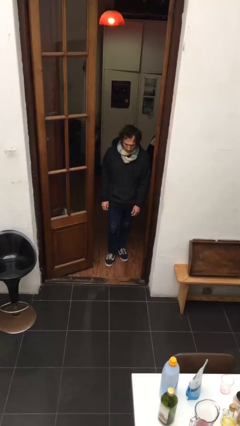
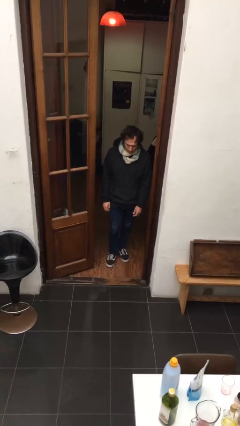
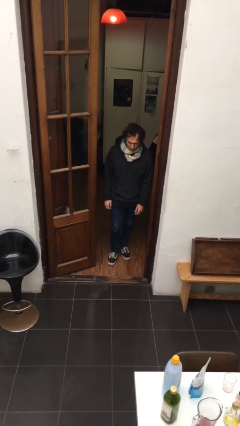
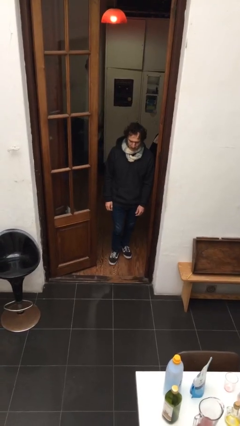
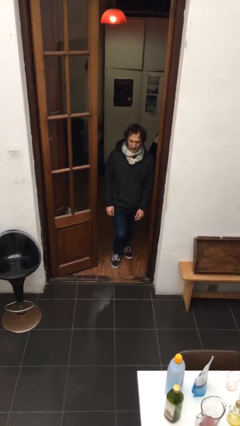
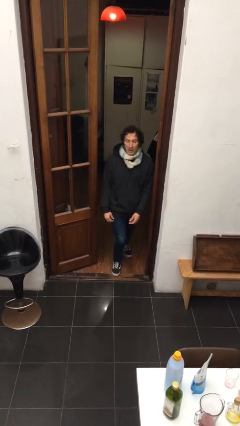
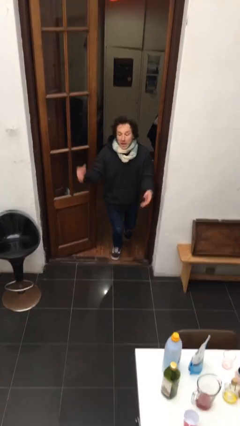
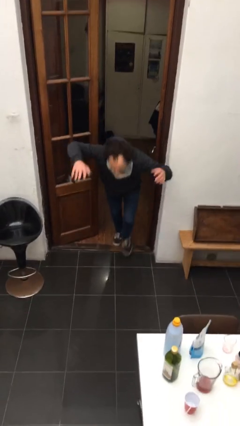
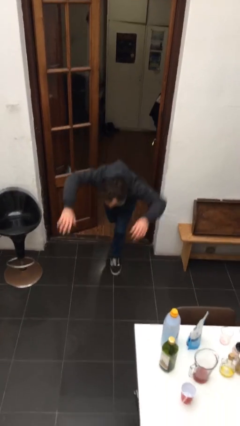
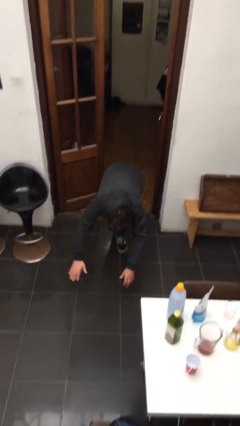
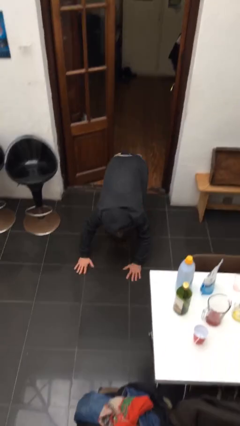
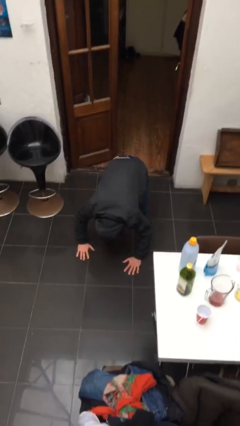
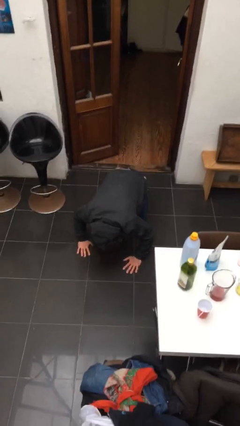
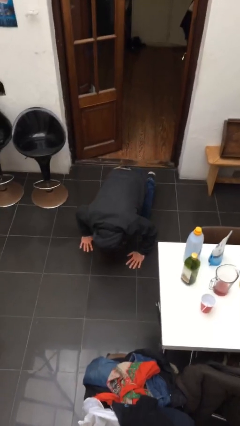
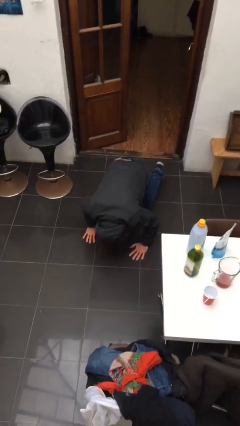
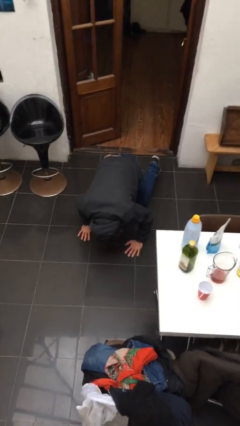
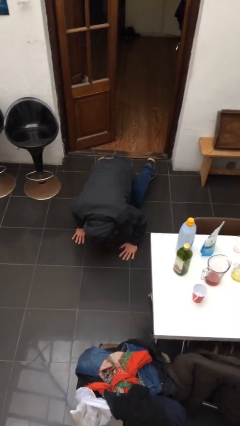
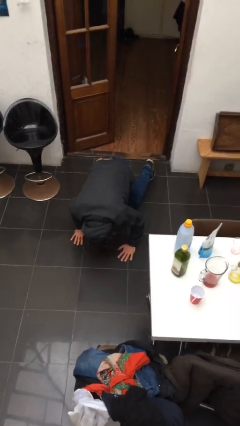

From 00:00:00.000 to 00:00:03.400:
person trips on object on floor

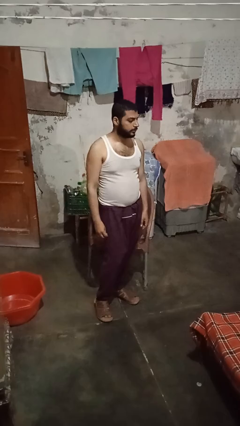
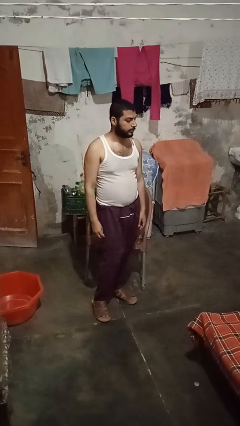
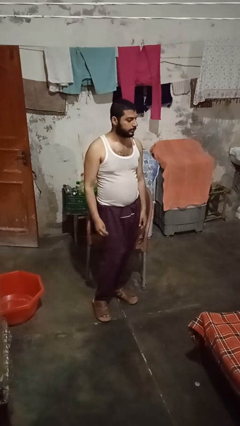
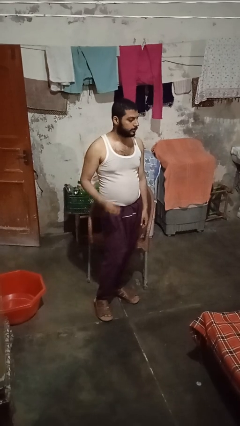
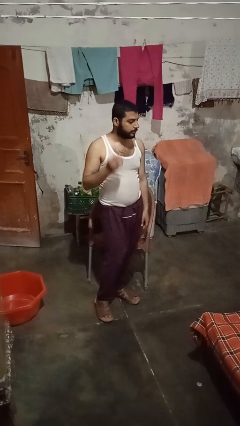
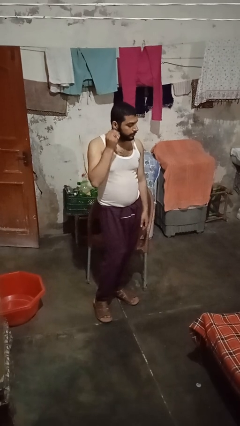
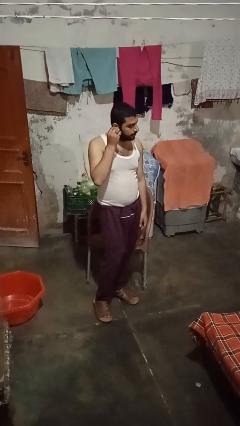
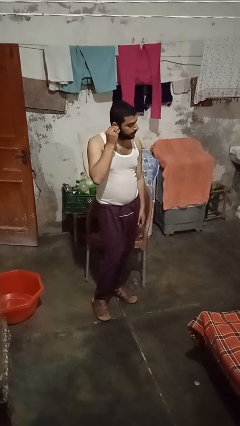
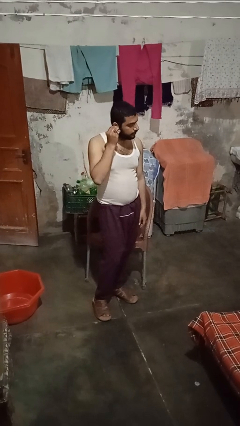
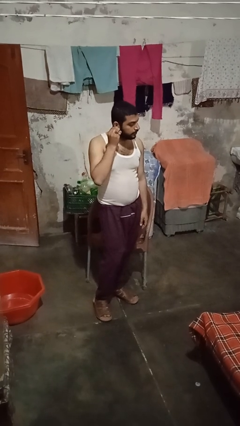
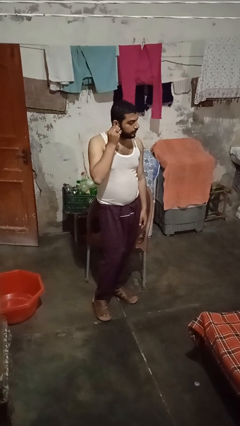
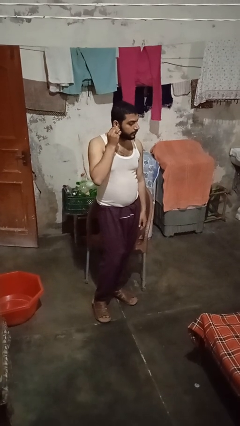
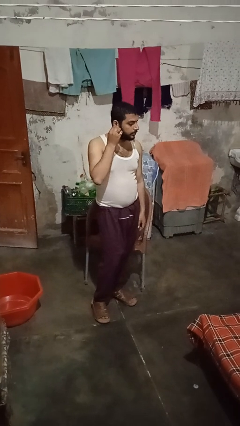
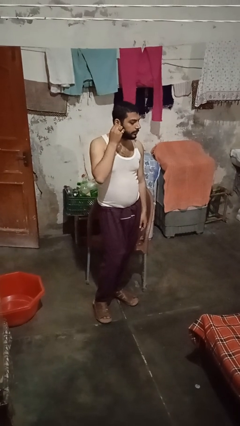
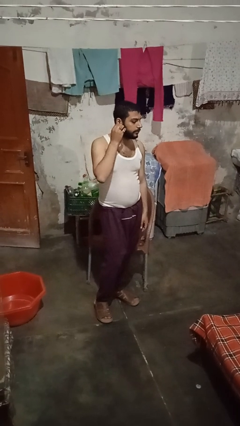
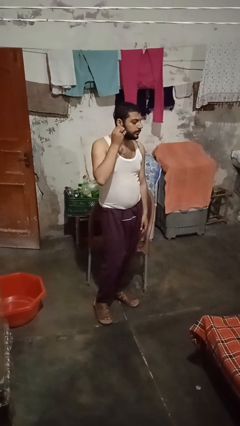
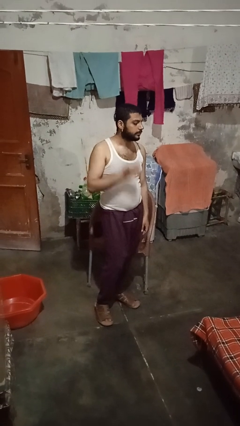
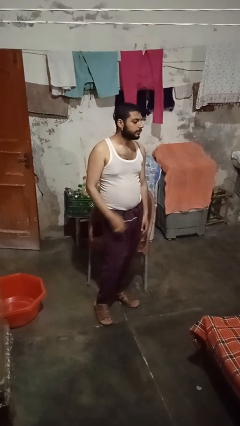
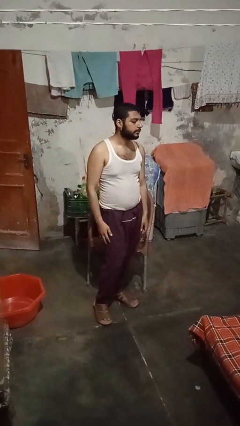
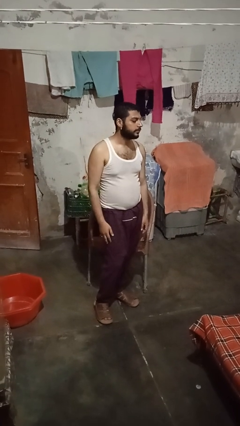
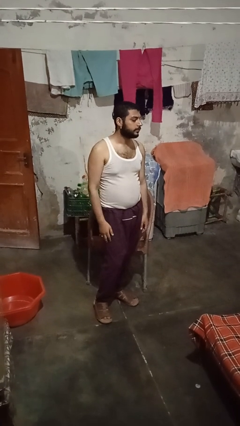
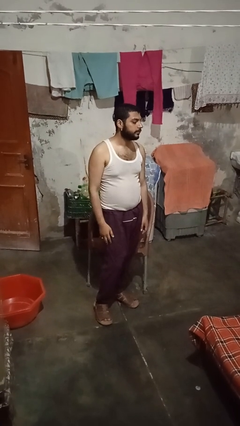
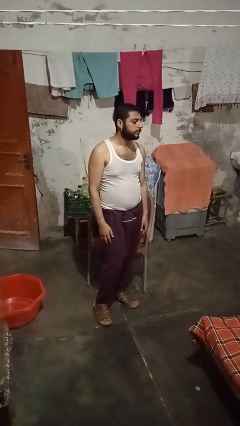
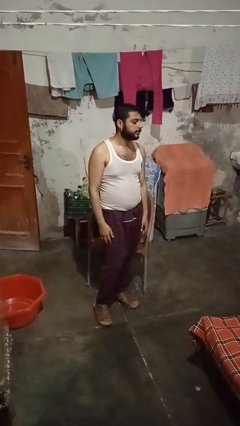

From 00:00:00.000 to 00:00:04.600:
person puts on earrings

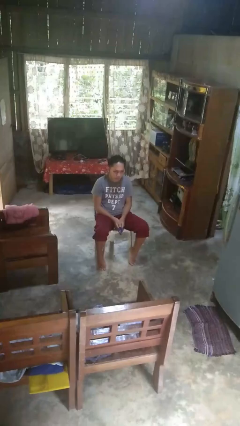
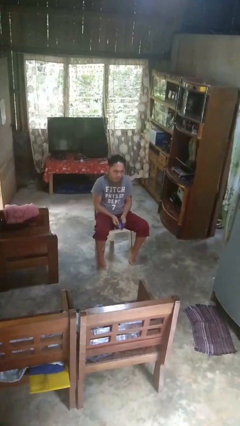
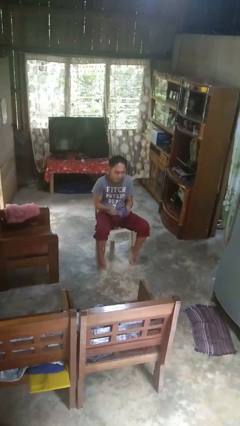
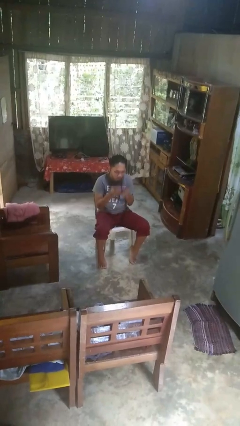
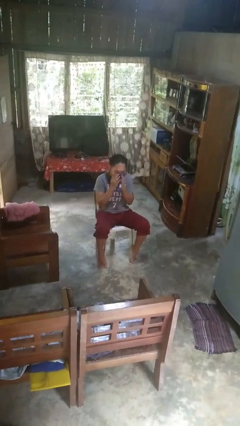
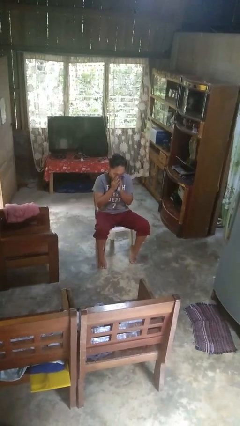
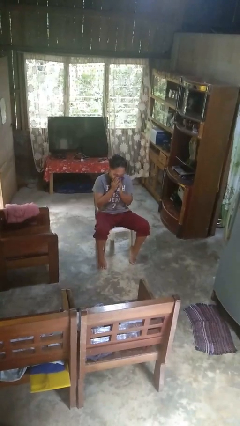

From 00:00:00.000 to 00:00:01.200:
person blows nose

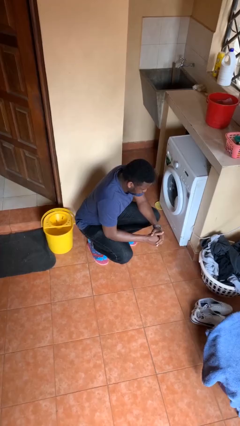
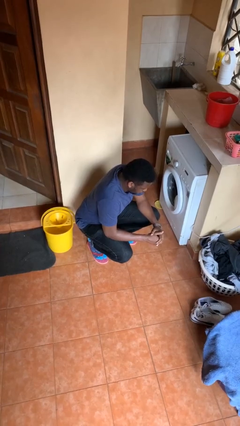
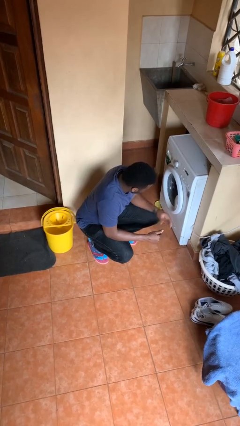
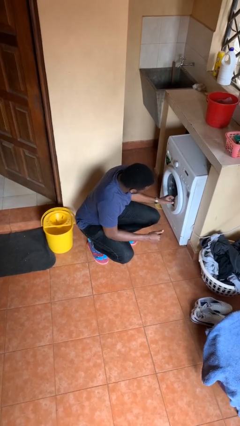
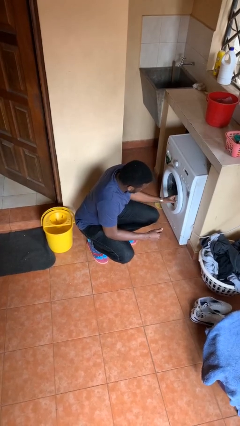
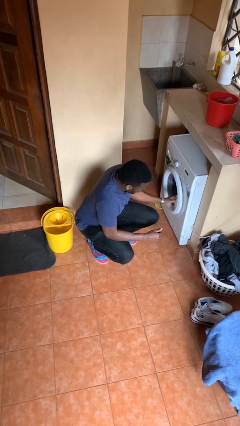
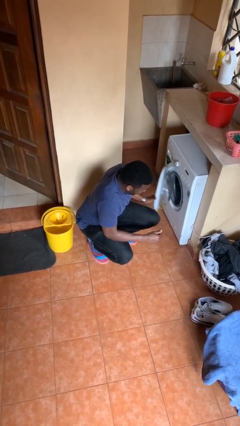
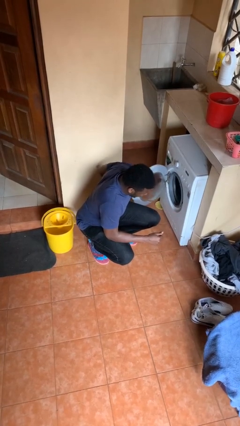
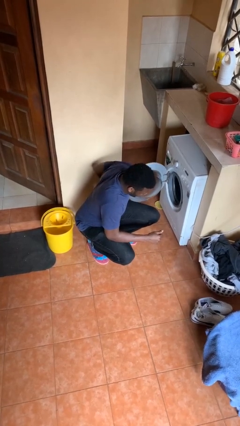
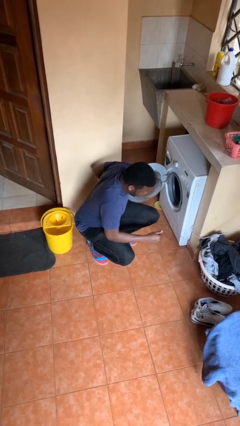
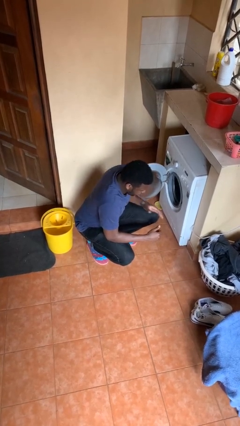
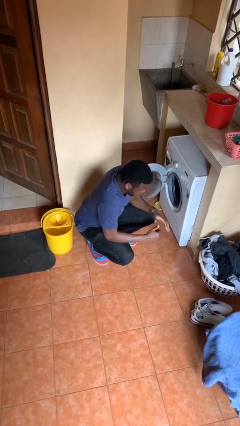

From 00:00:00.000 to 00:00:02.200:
person opens clothes washer

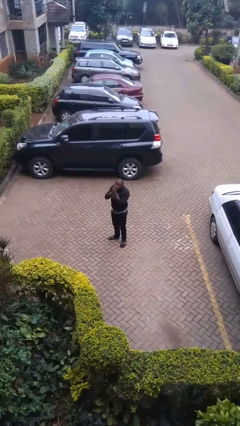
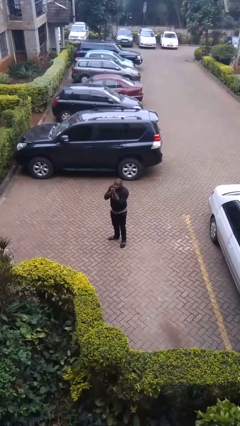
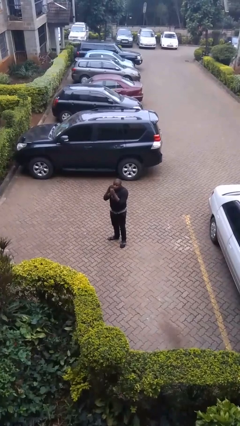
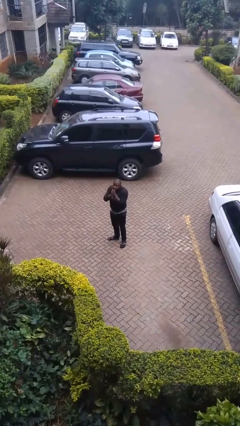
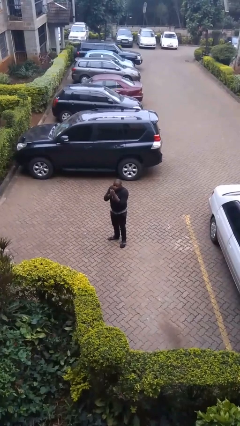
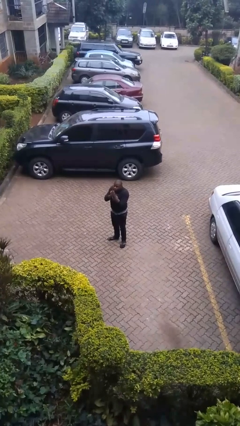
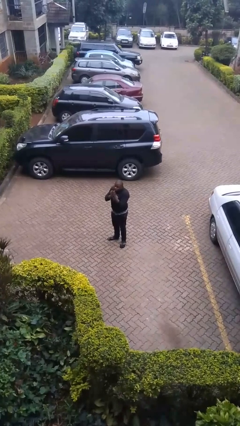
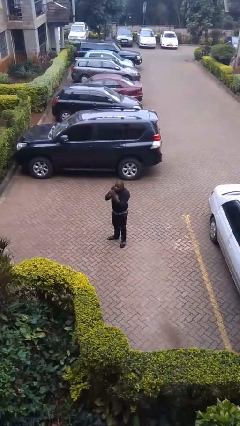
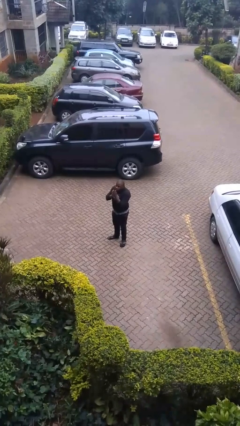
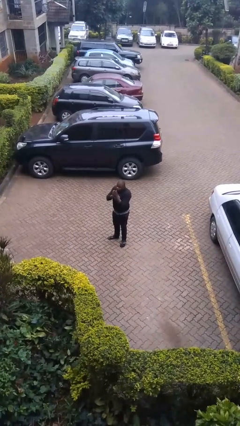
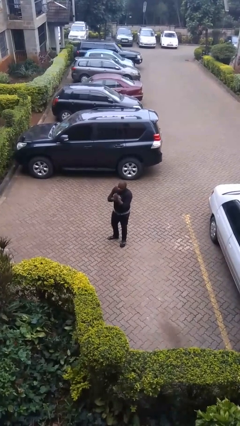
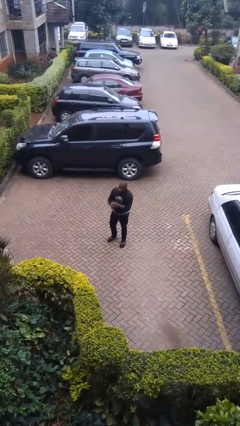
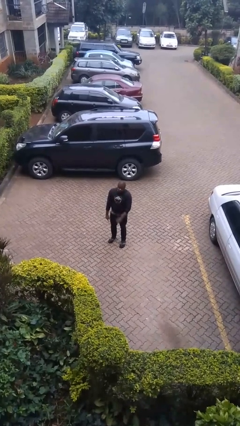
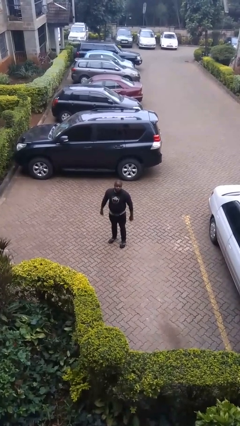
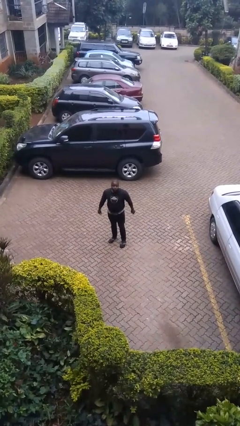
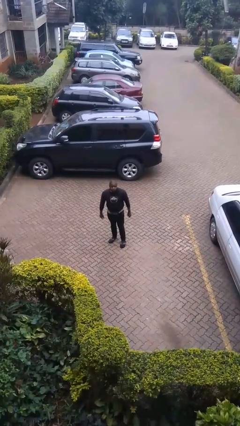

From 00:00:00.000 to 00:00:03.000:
person blows into hands

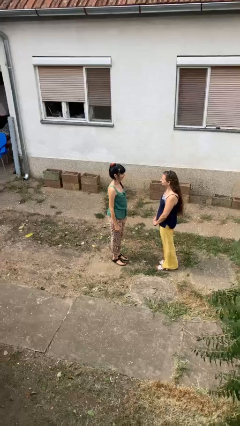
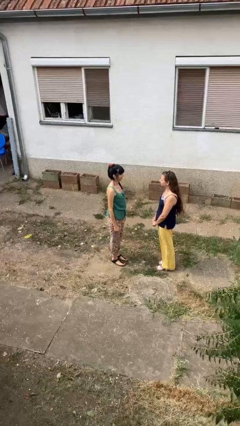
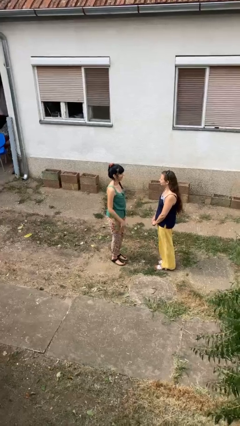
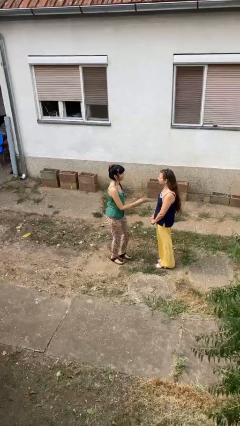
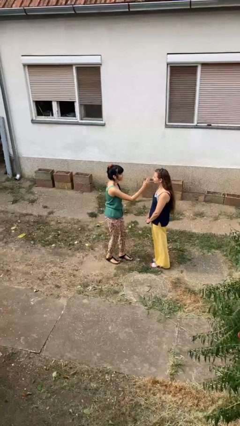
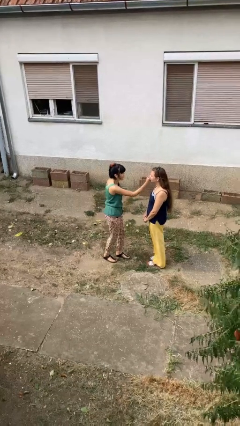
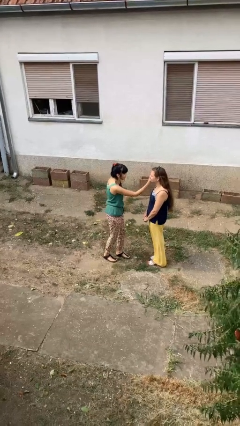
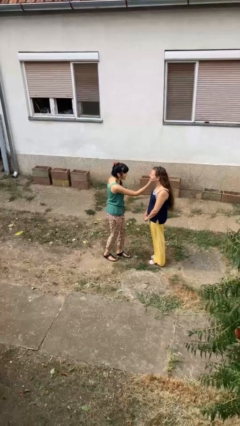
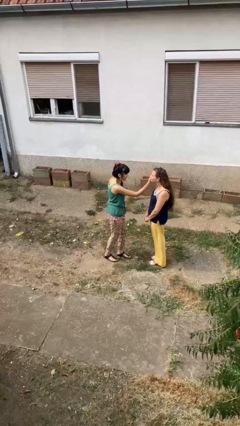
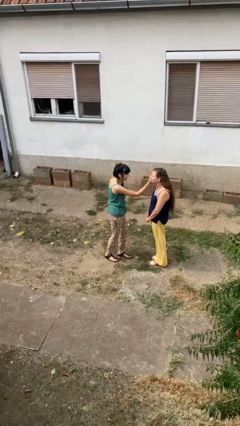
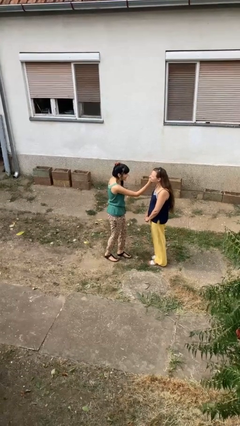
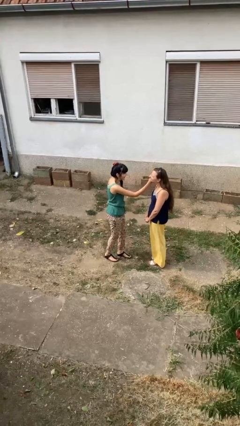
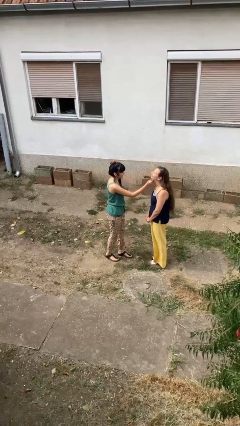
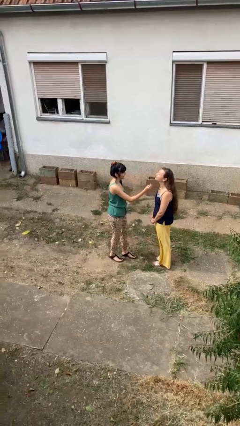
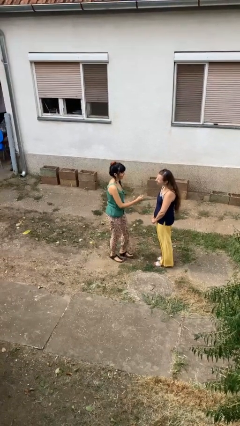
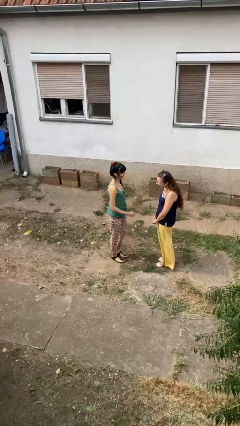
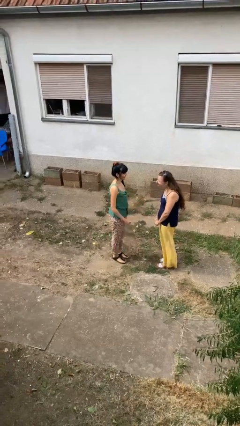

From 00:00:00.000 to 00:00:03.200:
person touches face of person
